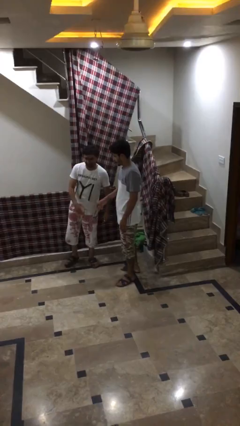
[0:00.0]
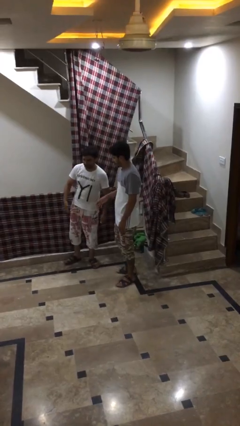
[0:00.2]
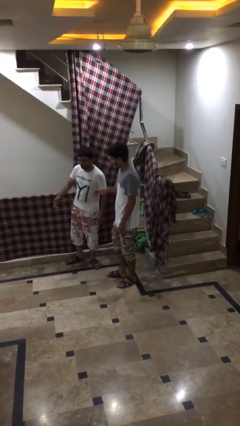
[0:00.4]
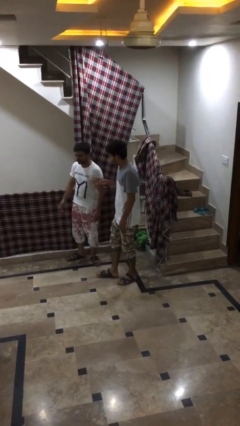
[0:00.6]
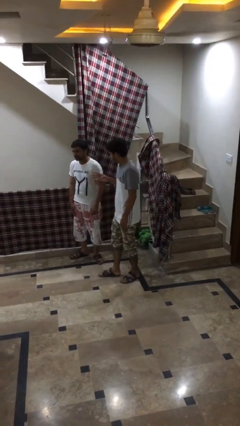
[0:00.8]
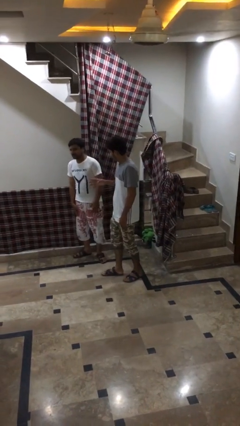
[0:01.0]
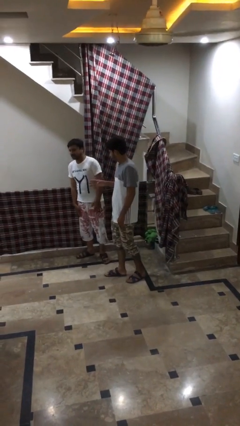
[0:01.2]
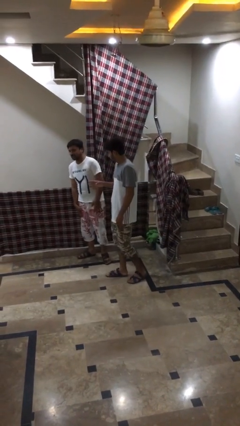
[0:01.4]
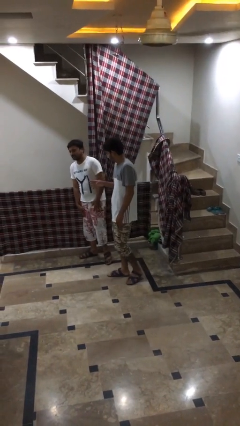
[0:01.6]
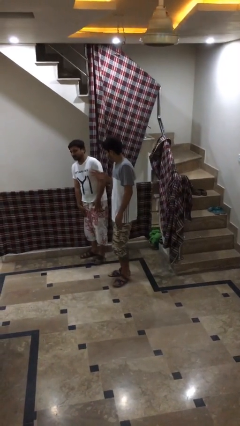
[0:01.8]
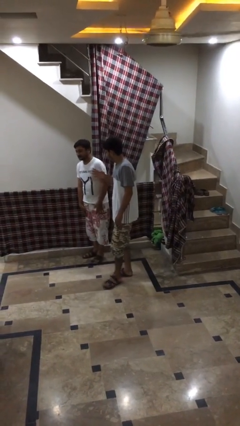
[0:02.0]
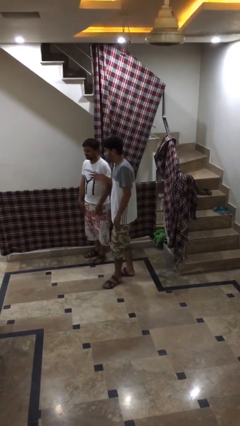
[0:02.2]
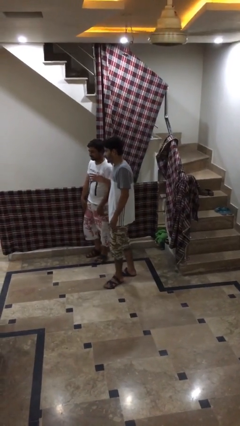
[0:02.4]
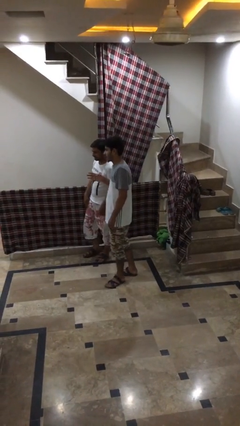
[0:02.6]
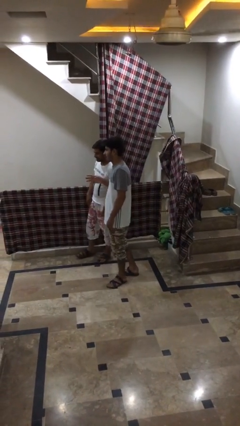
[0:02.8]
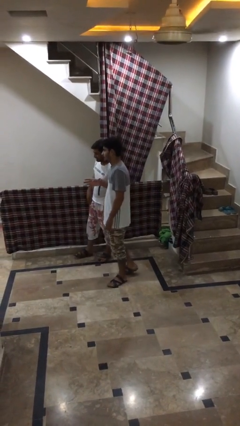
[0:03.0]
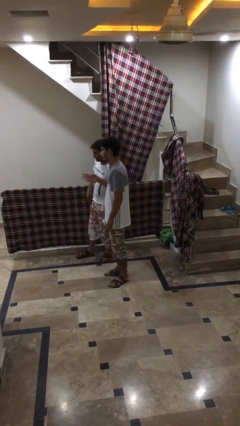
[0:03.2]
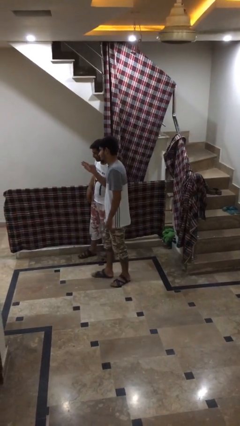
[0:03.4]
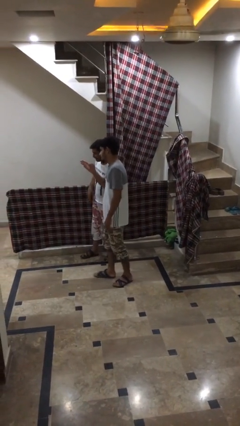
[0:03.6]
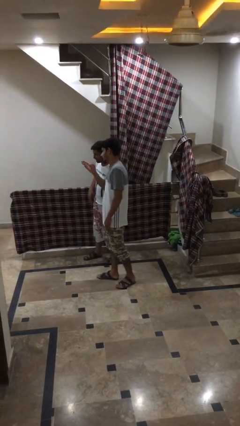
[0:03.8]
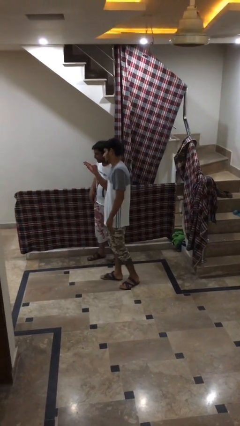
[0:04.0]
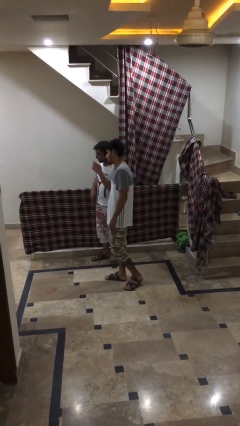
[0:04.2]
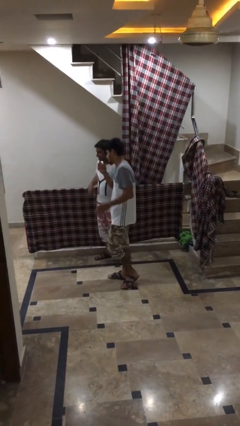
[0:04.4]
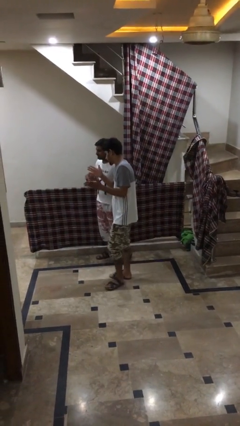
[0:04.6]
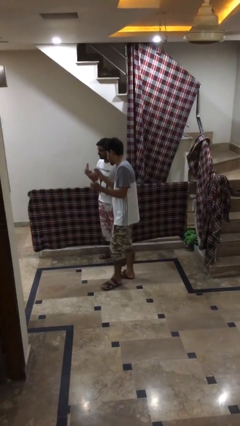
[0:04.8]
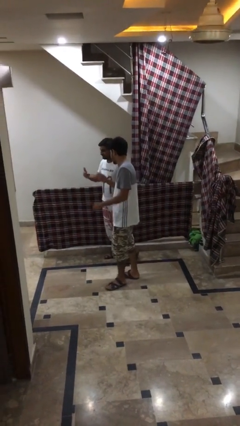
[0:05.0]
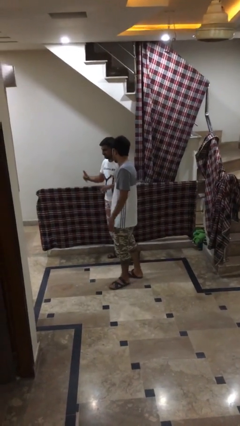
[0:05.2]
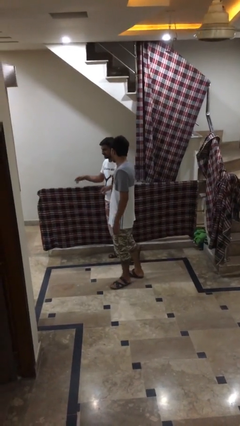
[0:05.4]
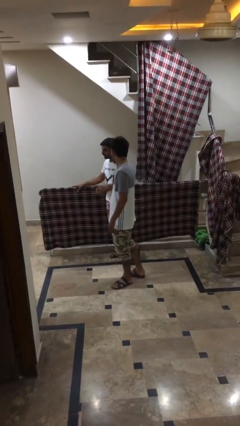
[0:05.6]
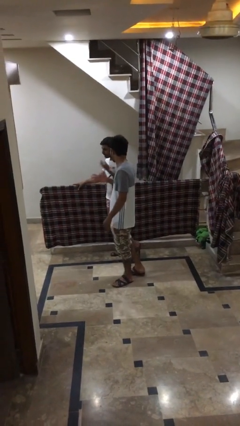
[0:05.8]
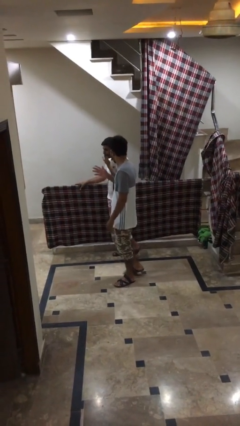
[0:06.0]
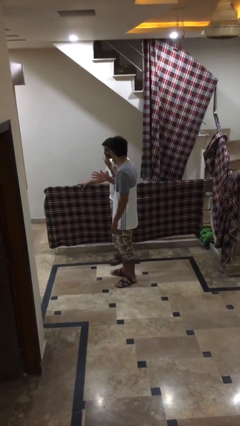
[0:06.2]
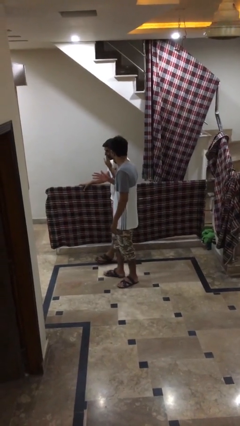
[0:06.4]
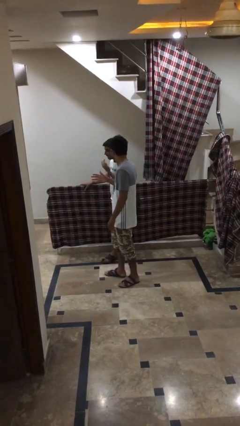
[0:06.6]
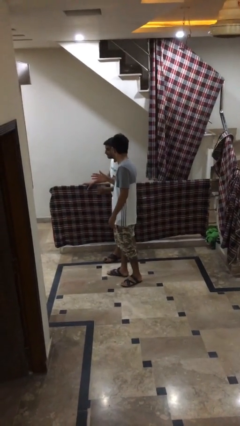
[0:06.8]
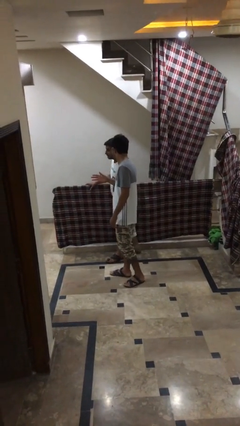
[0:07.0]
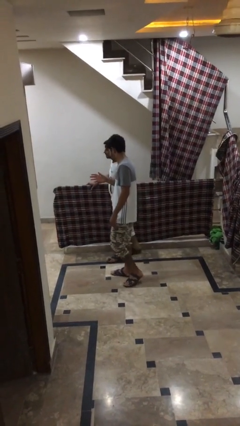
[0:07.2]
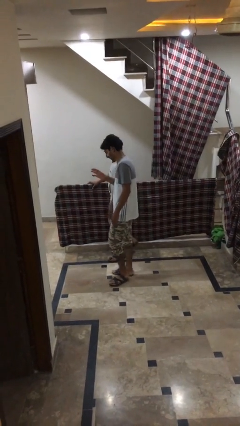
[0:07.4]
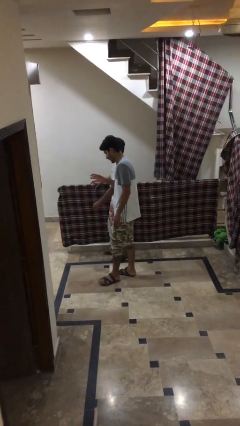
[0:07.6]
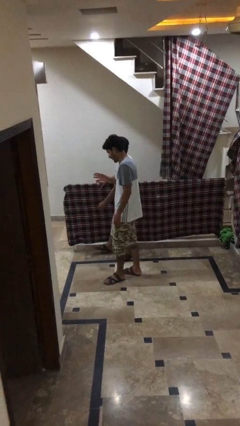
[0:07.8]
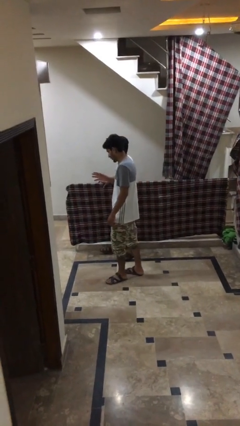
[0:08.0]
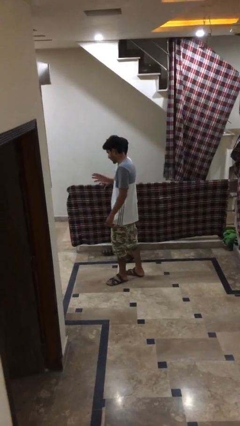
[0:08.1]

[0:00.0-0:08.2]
person talks to person

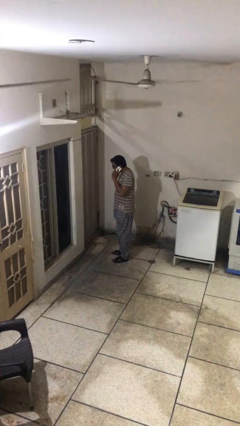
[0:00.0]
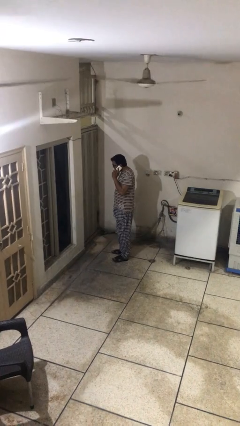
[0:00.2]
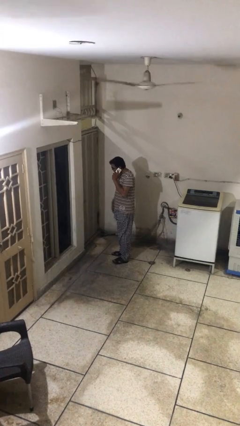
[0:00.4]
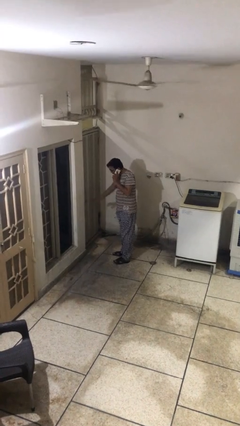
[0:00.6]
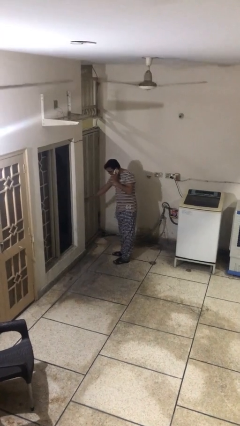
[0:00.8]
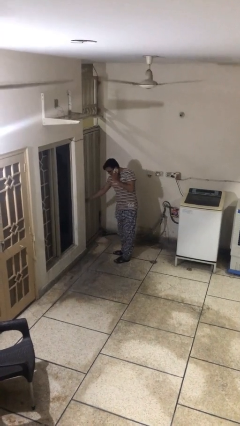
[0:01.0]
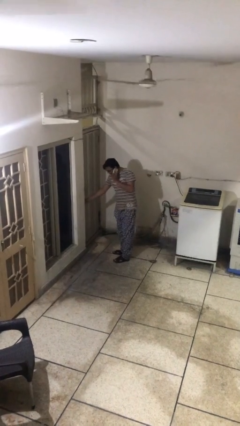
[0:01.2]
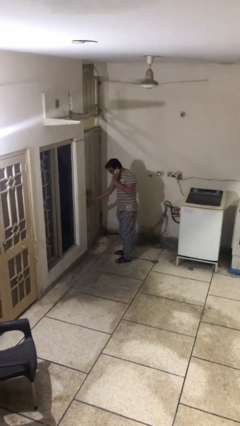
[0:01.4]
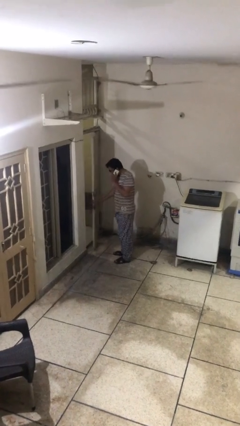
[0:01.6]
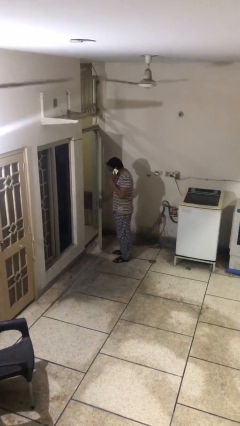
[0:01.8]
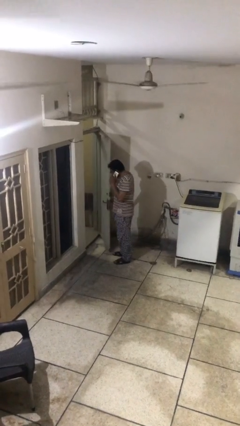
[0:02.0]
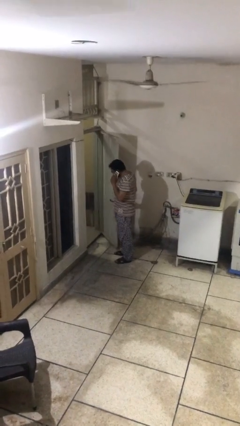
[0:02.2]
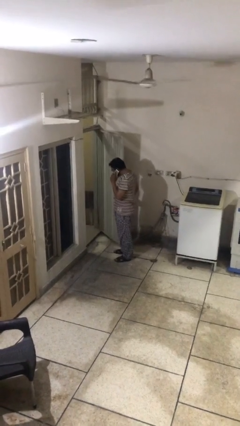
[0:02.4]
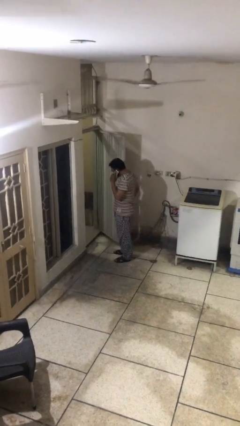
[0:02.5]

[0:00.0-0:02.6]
person opens facility door

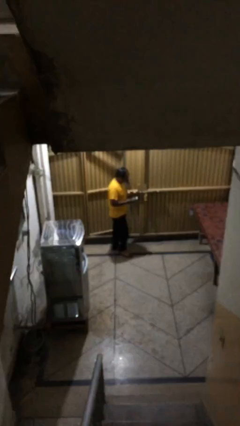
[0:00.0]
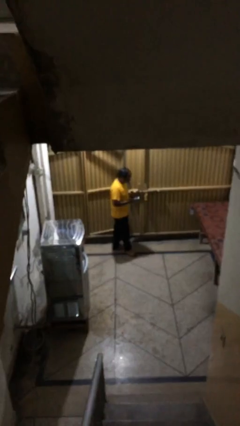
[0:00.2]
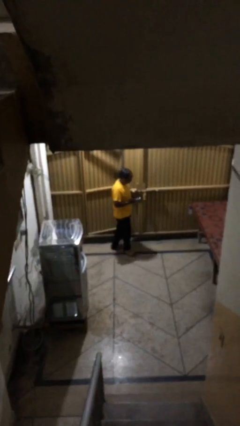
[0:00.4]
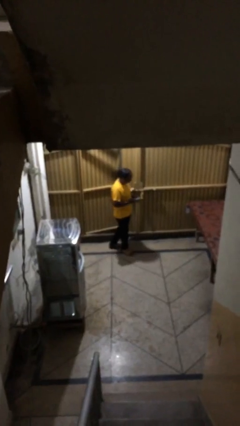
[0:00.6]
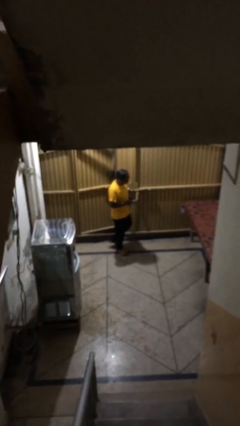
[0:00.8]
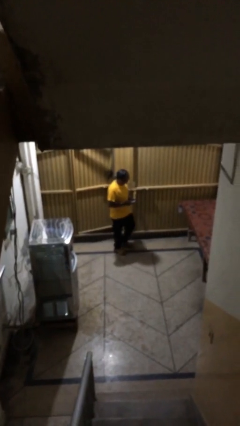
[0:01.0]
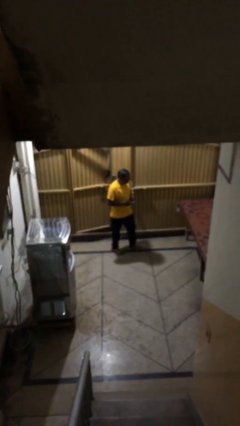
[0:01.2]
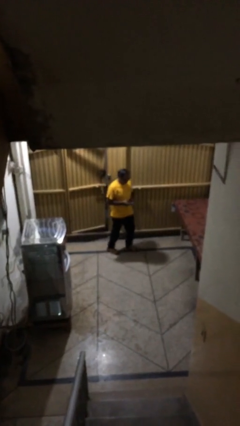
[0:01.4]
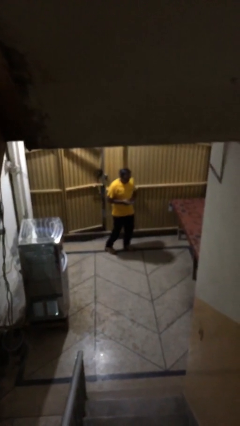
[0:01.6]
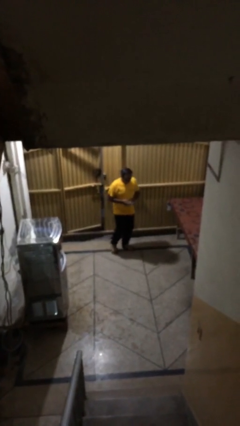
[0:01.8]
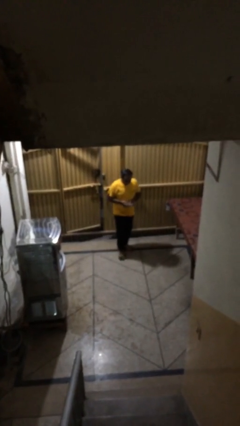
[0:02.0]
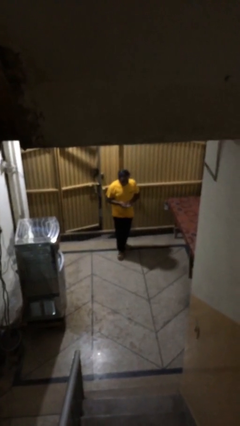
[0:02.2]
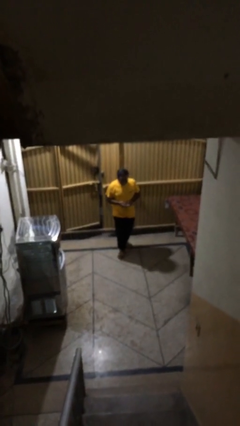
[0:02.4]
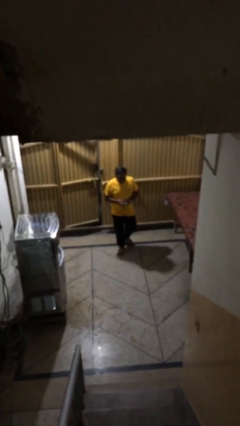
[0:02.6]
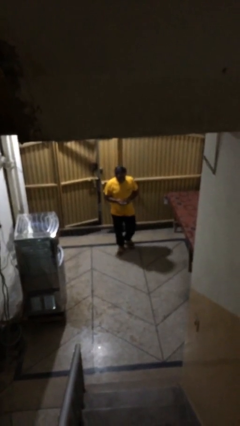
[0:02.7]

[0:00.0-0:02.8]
person texts on phone

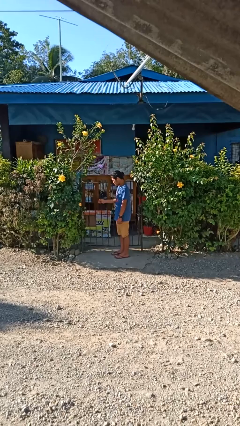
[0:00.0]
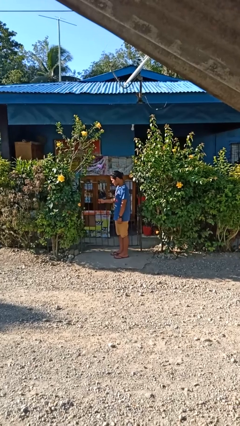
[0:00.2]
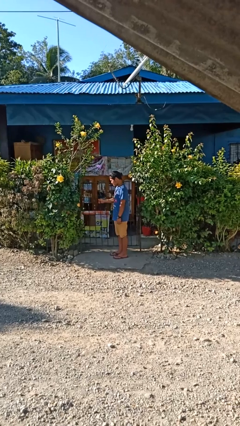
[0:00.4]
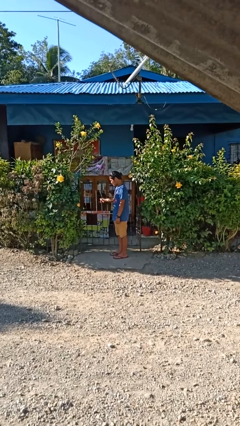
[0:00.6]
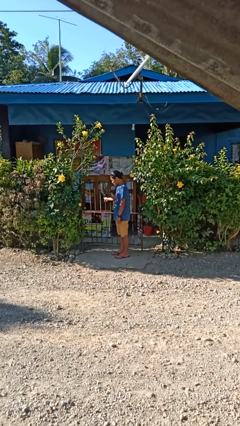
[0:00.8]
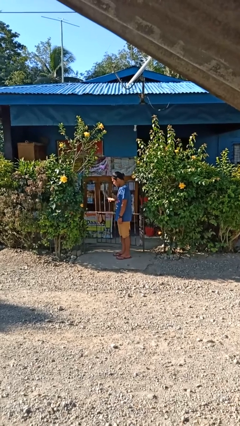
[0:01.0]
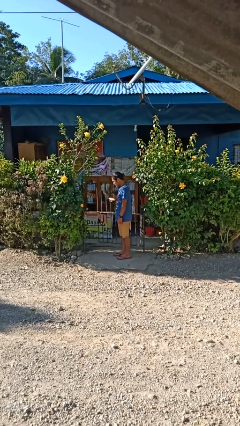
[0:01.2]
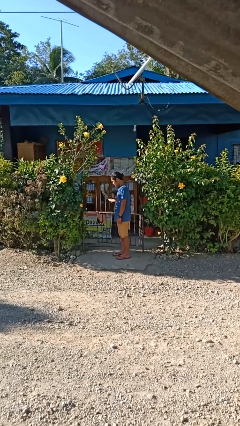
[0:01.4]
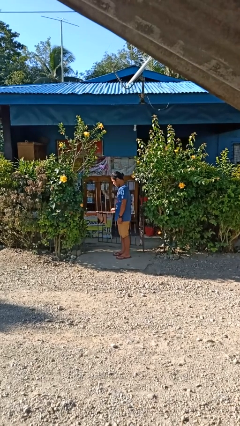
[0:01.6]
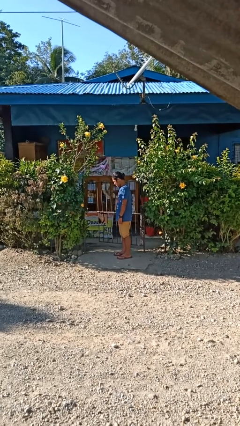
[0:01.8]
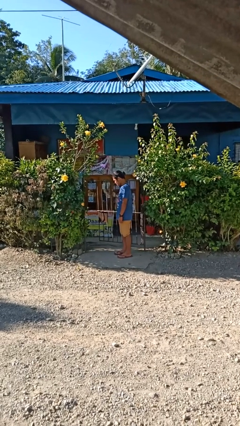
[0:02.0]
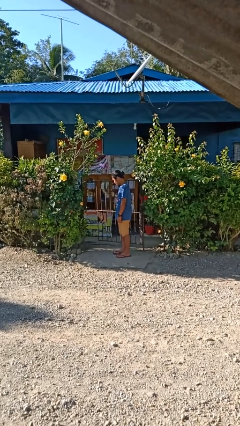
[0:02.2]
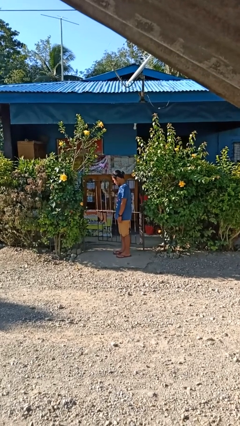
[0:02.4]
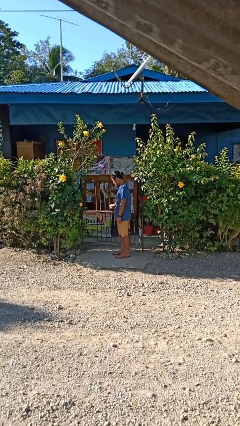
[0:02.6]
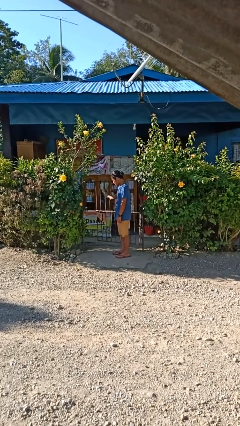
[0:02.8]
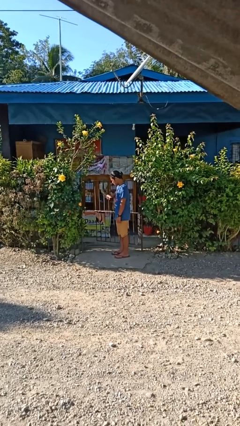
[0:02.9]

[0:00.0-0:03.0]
person opens gate

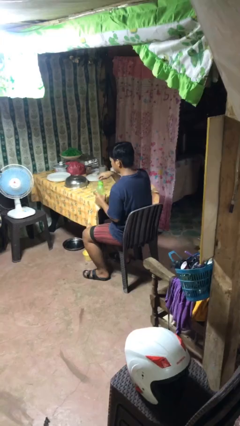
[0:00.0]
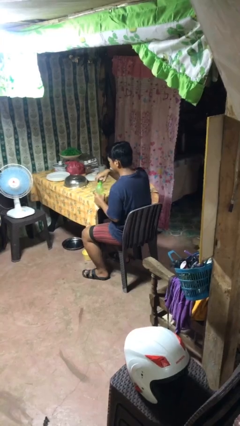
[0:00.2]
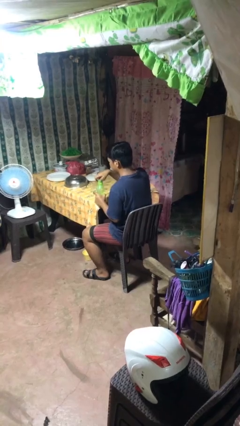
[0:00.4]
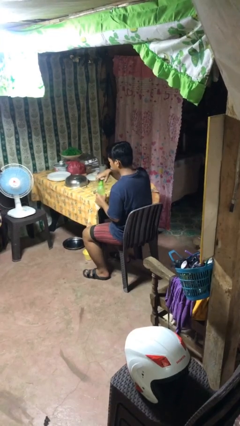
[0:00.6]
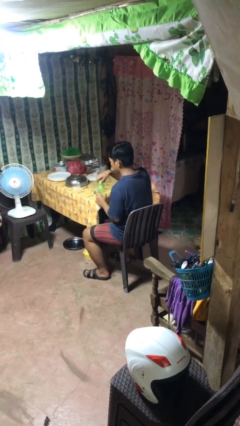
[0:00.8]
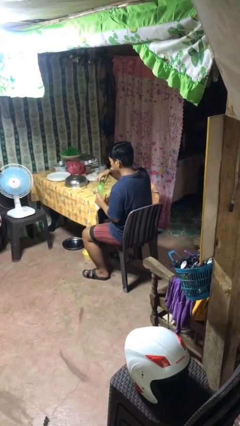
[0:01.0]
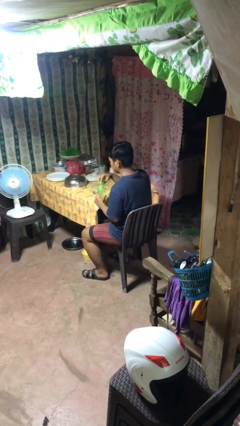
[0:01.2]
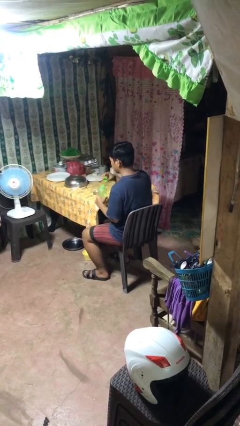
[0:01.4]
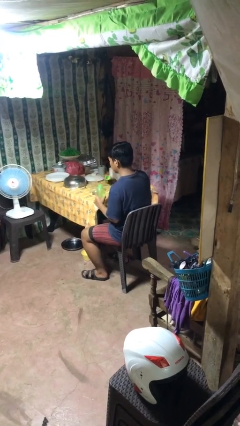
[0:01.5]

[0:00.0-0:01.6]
person unscrews lid from bottle
